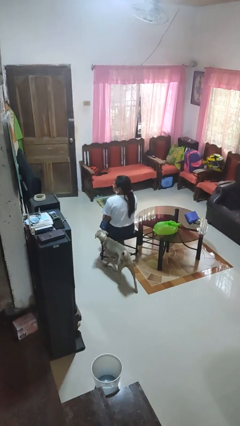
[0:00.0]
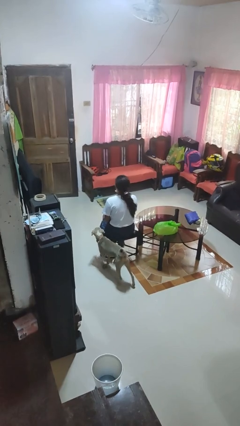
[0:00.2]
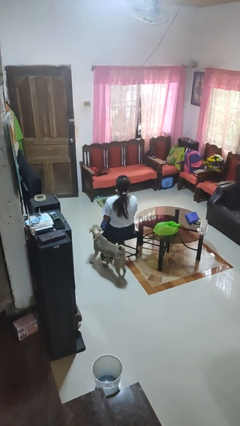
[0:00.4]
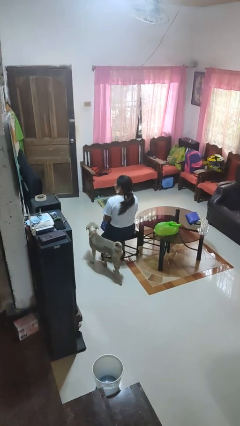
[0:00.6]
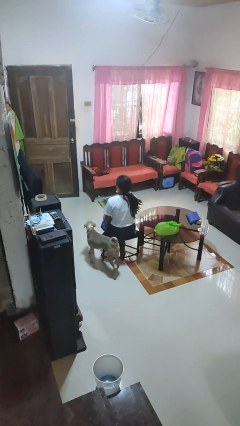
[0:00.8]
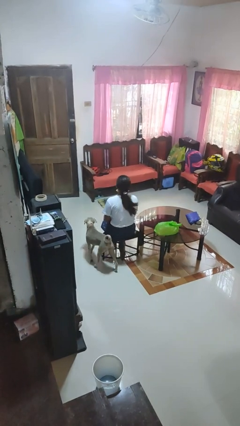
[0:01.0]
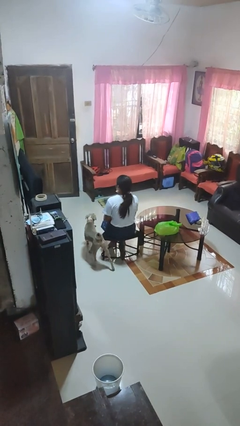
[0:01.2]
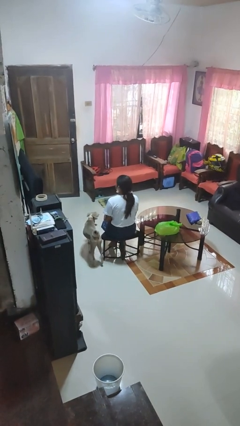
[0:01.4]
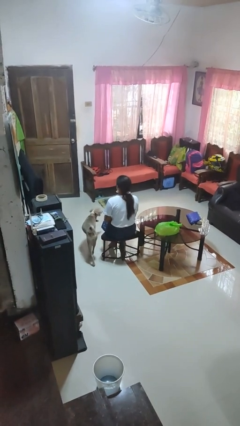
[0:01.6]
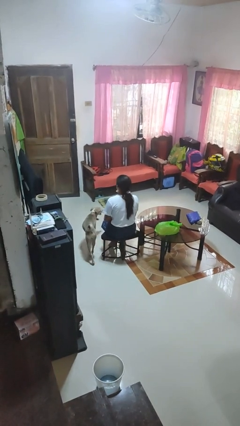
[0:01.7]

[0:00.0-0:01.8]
person shakes head

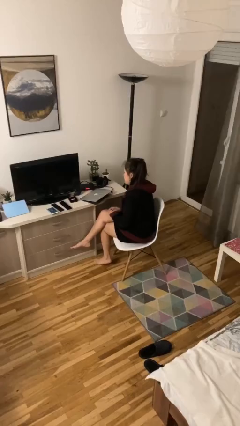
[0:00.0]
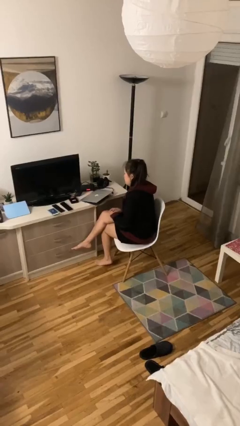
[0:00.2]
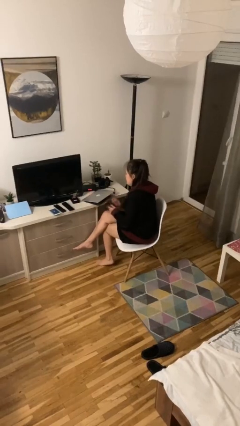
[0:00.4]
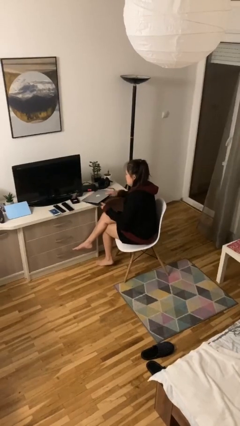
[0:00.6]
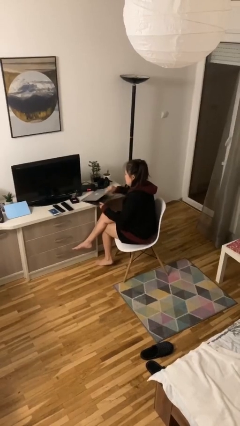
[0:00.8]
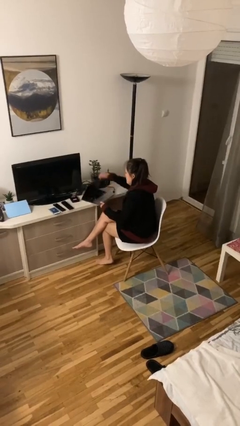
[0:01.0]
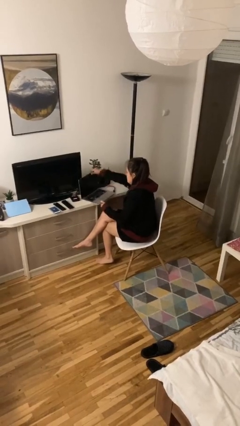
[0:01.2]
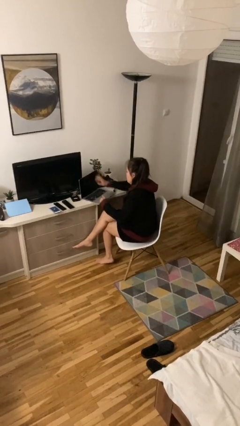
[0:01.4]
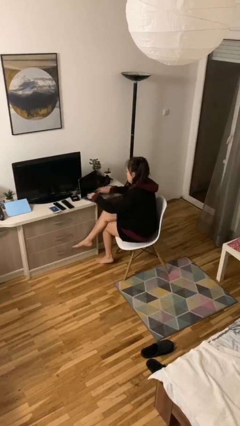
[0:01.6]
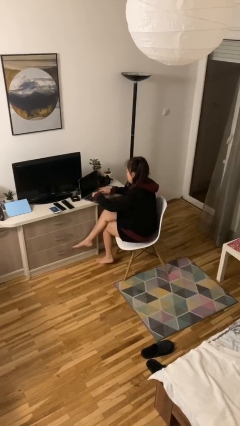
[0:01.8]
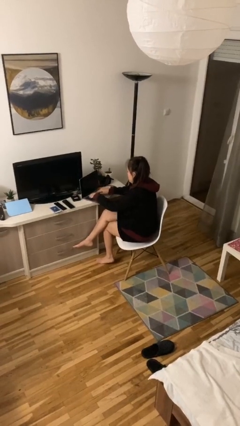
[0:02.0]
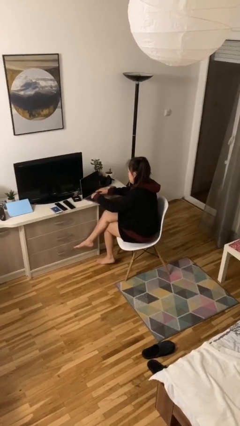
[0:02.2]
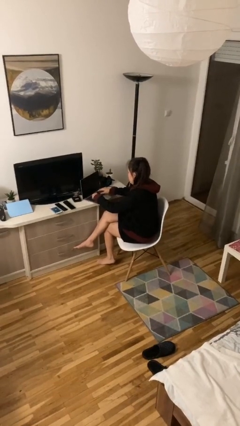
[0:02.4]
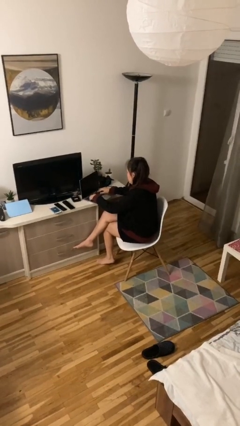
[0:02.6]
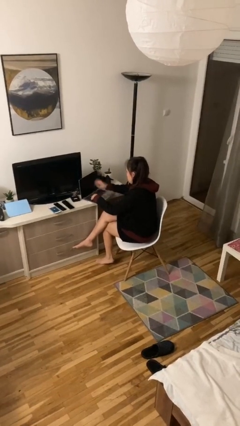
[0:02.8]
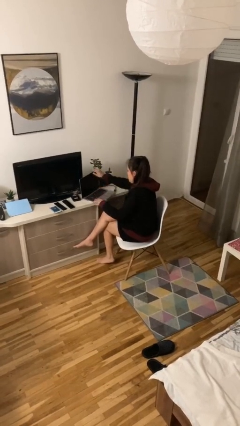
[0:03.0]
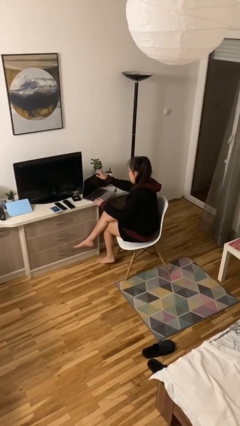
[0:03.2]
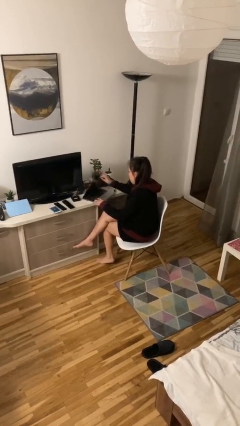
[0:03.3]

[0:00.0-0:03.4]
person interacts with laptop

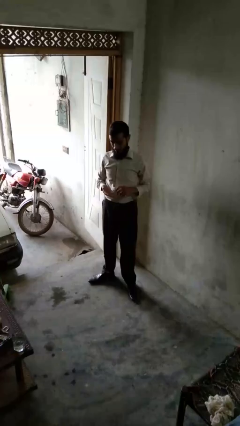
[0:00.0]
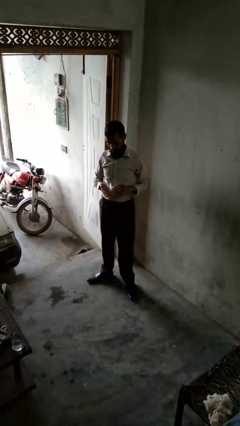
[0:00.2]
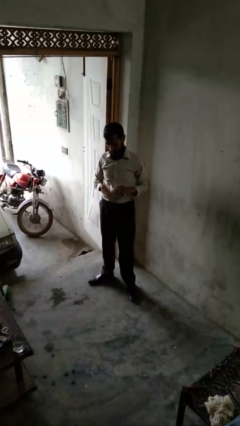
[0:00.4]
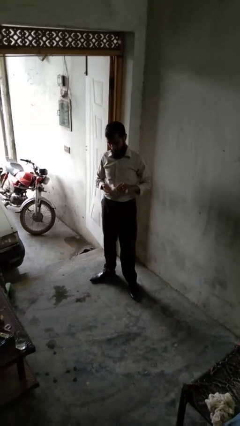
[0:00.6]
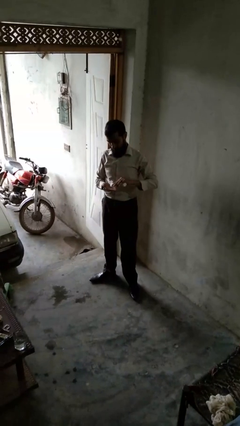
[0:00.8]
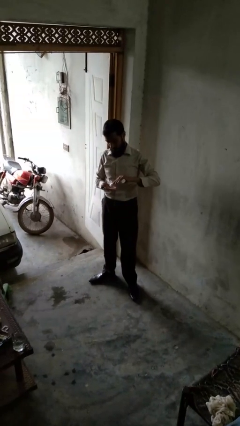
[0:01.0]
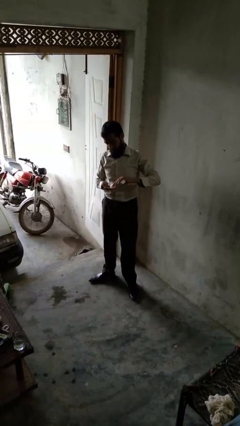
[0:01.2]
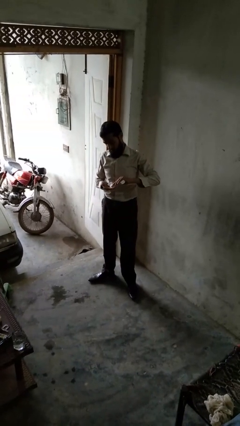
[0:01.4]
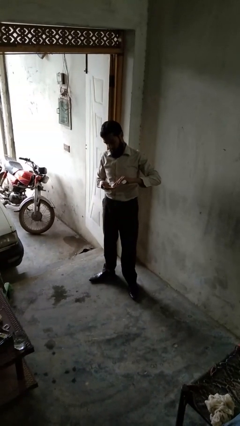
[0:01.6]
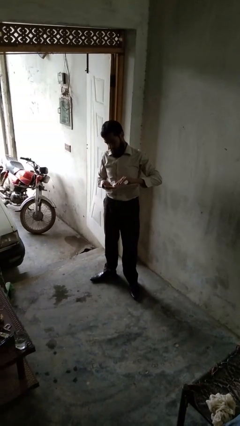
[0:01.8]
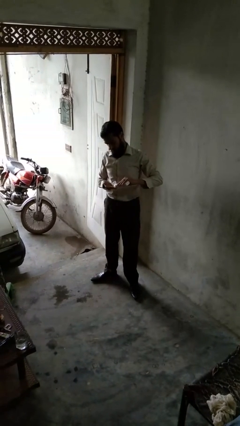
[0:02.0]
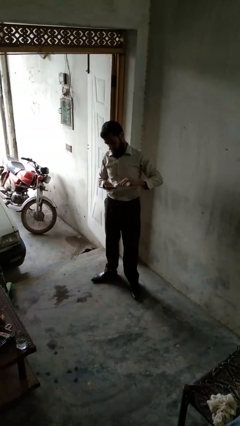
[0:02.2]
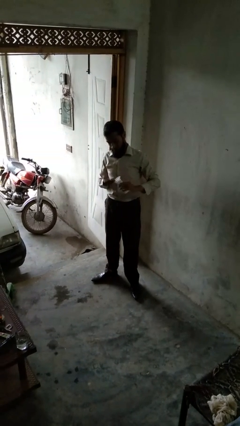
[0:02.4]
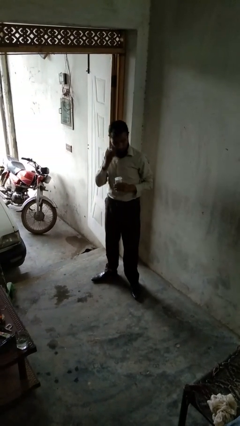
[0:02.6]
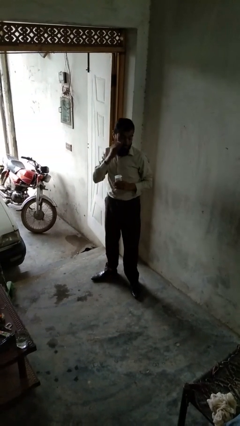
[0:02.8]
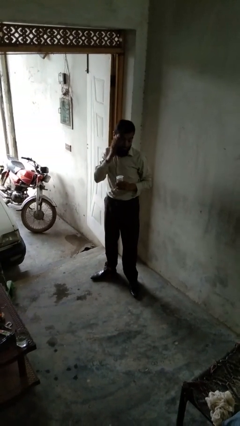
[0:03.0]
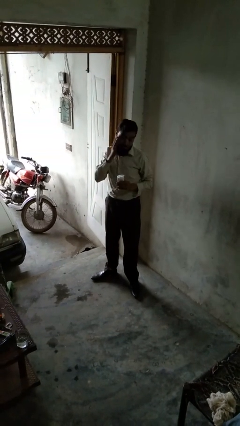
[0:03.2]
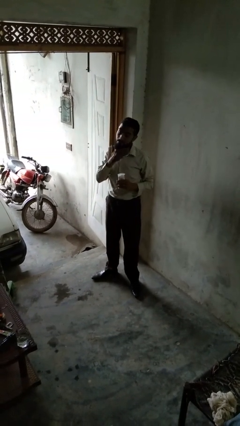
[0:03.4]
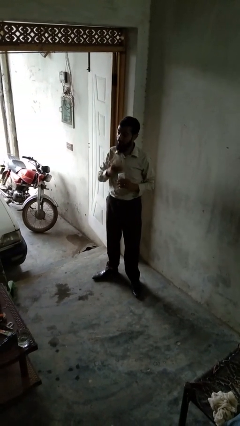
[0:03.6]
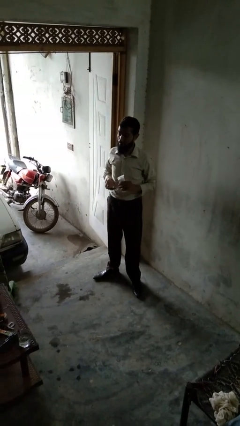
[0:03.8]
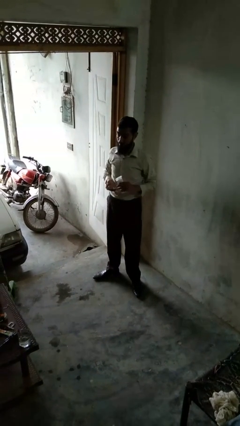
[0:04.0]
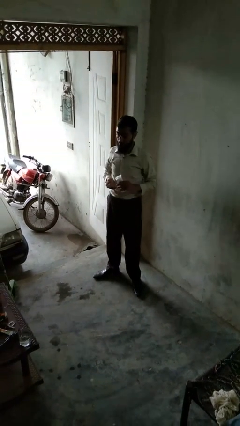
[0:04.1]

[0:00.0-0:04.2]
person applies sunscreen

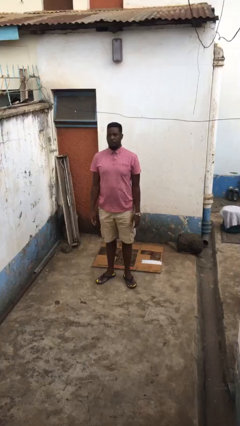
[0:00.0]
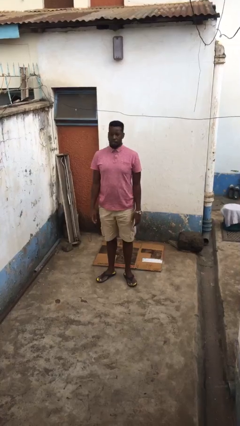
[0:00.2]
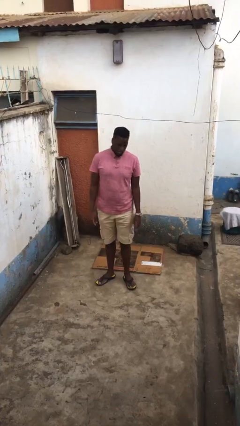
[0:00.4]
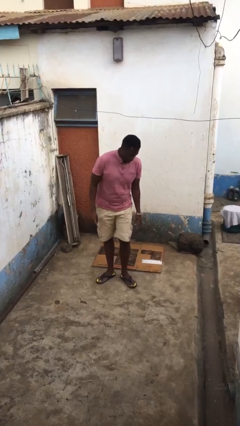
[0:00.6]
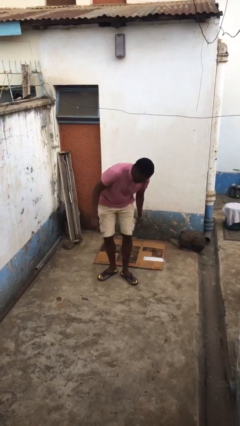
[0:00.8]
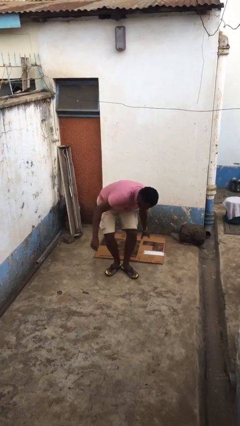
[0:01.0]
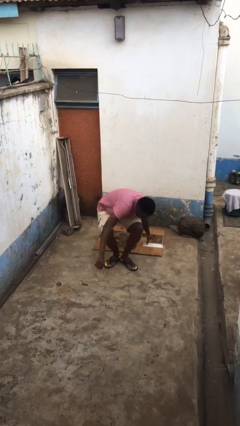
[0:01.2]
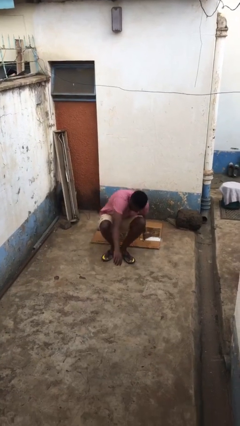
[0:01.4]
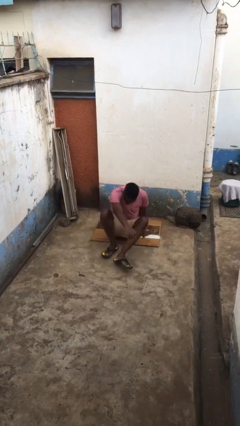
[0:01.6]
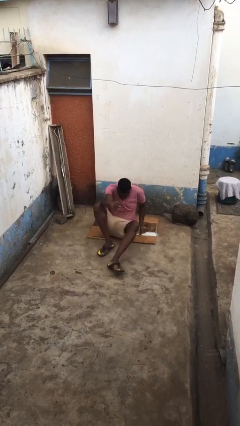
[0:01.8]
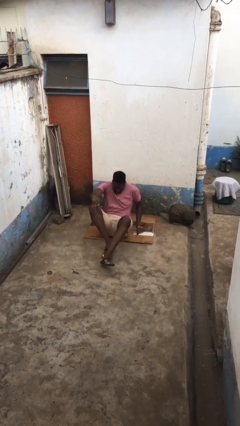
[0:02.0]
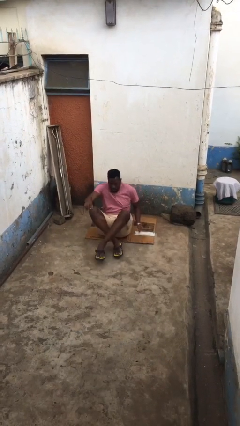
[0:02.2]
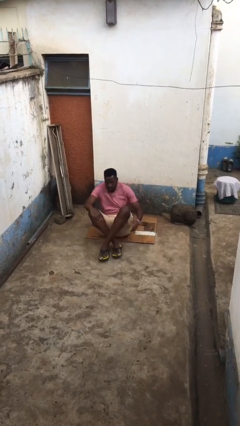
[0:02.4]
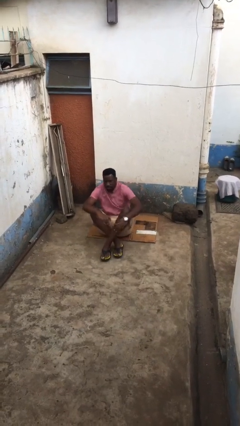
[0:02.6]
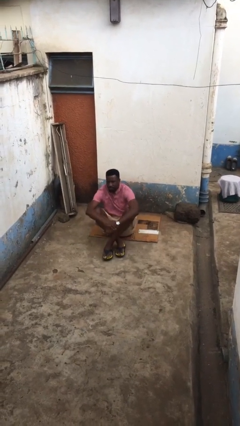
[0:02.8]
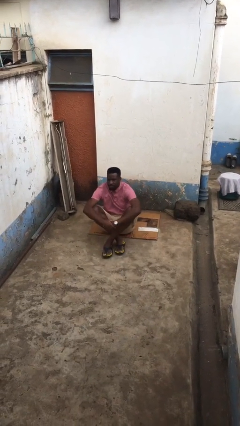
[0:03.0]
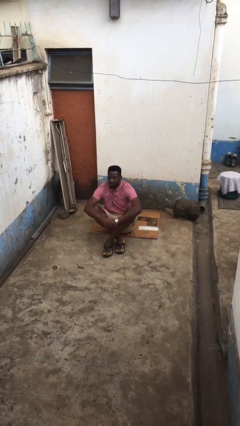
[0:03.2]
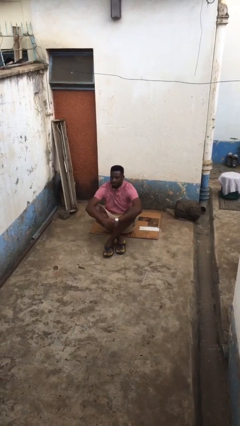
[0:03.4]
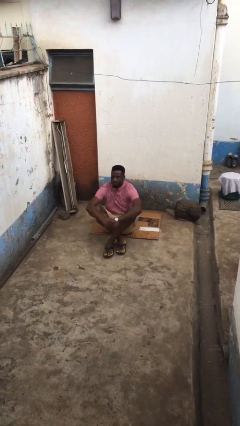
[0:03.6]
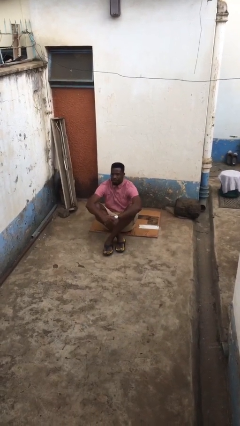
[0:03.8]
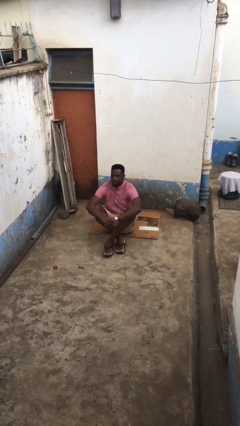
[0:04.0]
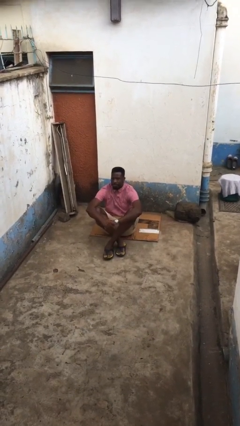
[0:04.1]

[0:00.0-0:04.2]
person sits crisscross

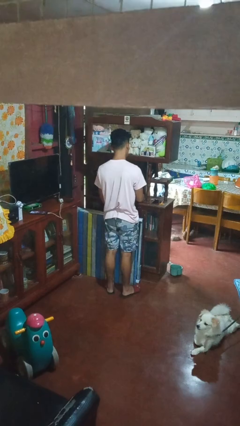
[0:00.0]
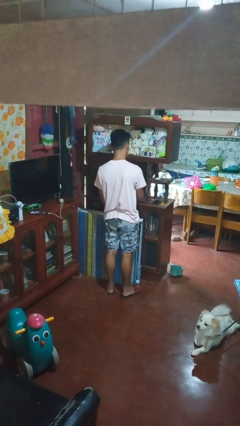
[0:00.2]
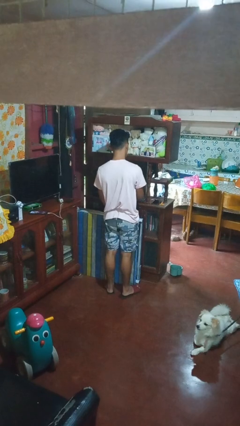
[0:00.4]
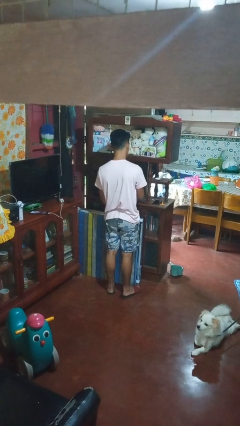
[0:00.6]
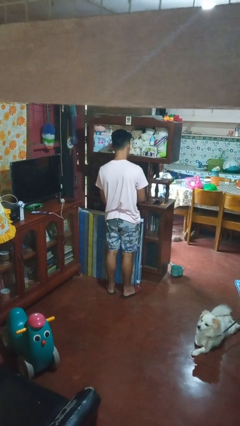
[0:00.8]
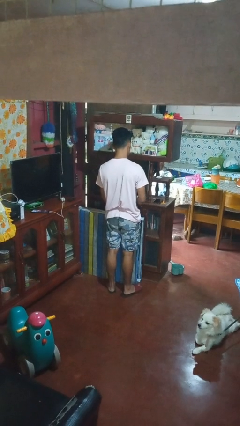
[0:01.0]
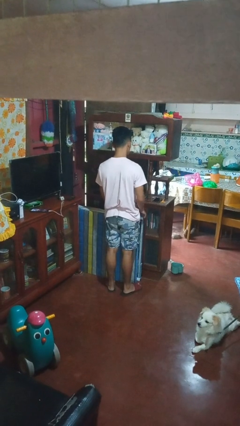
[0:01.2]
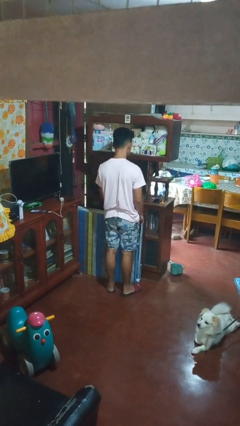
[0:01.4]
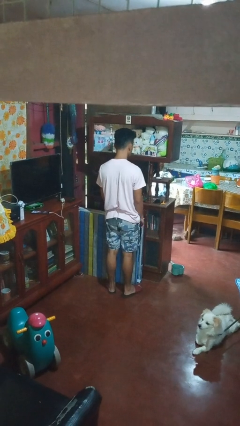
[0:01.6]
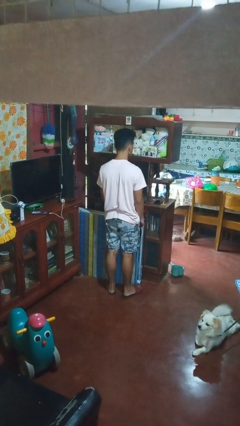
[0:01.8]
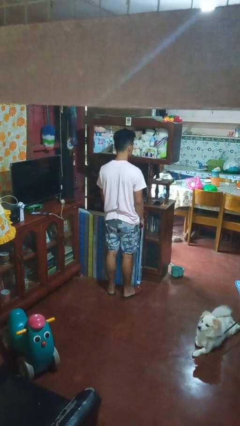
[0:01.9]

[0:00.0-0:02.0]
person puts down object on shelf

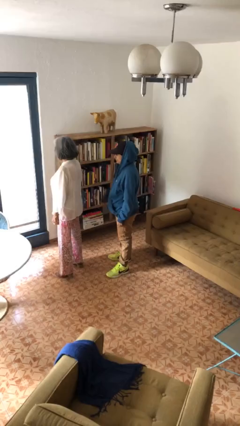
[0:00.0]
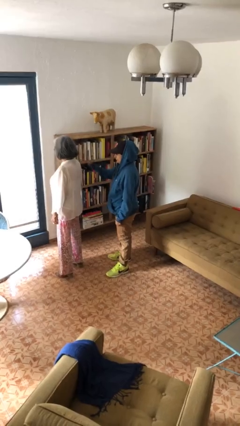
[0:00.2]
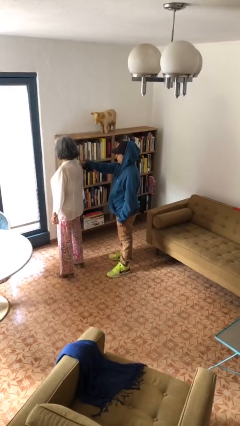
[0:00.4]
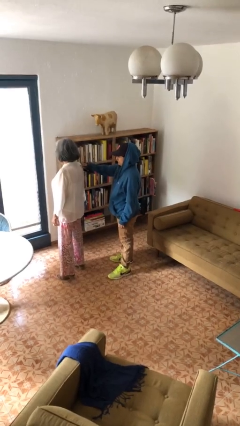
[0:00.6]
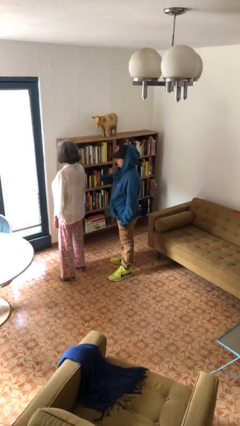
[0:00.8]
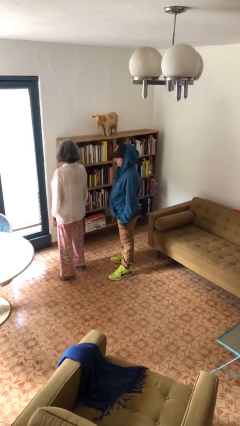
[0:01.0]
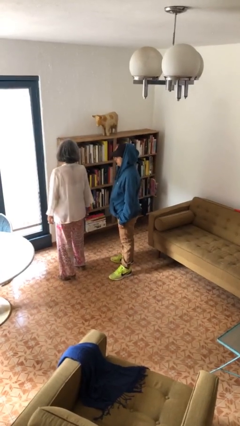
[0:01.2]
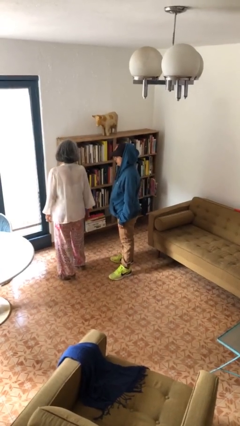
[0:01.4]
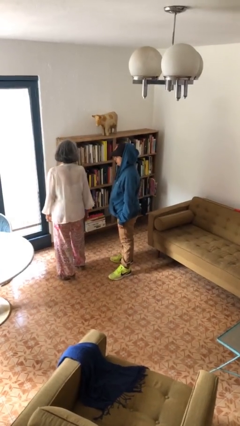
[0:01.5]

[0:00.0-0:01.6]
person touches back of person
